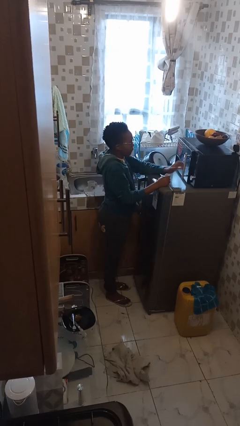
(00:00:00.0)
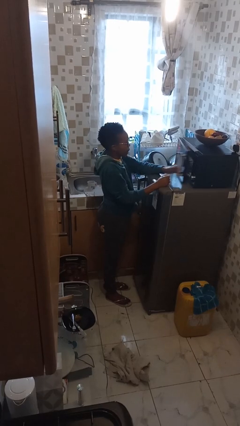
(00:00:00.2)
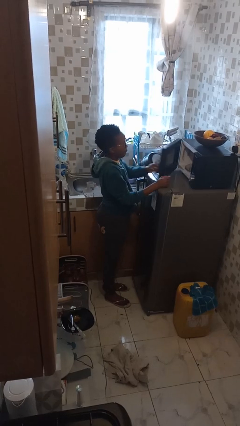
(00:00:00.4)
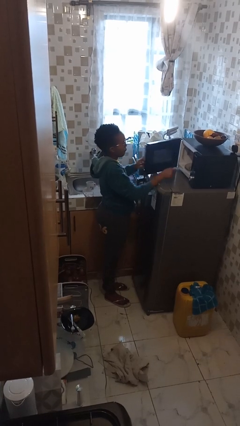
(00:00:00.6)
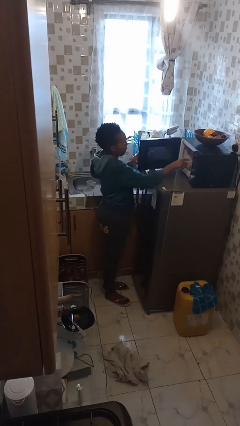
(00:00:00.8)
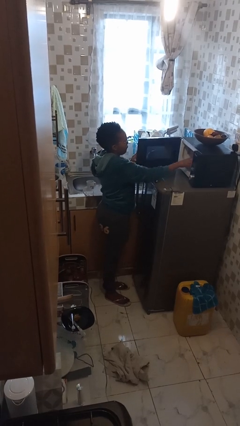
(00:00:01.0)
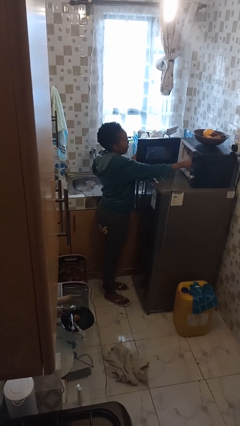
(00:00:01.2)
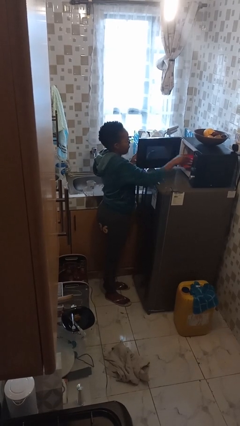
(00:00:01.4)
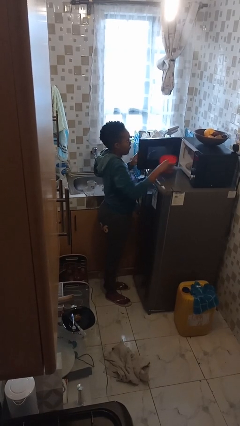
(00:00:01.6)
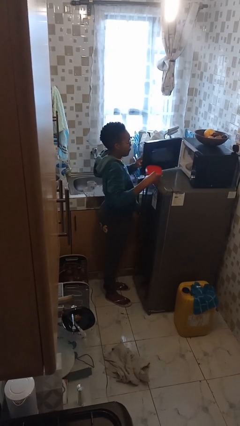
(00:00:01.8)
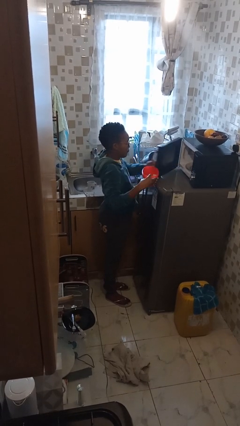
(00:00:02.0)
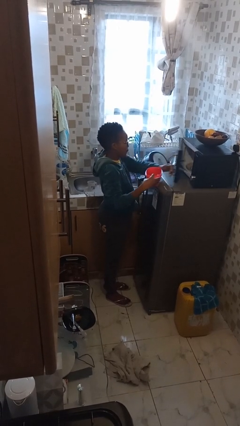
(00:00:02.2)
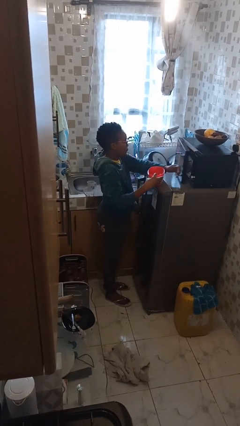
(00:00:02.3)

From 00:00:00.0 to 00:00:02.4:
person takes object from microwave

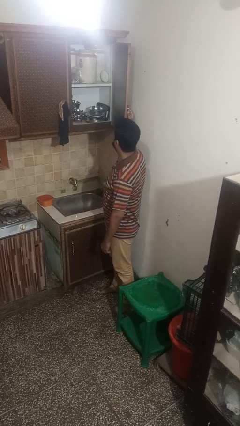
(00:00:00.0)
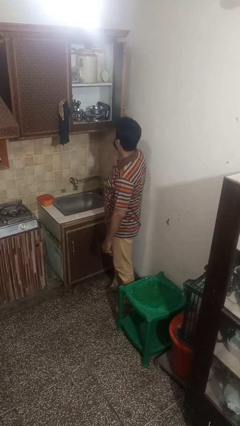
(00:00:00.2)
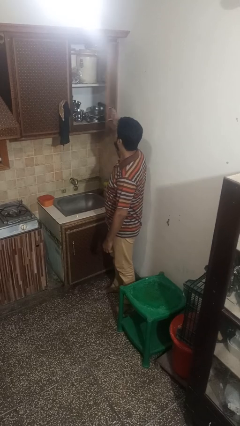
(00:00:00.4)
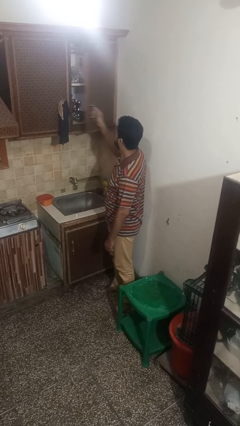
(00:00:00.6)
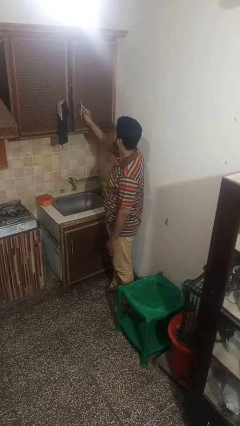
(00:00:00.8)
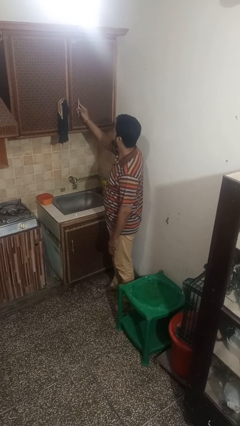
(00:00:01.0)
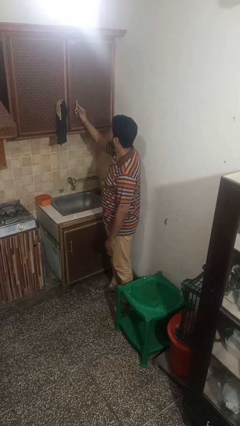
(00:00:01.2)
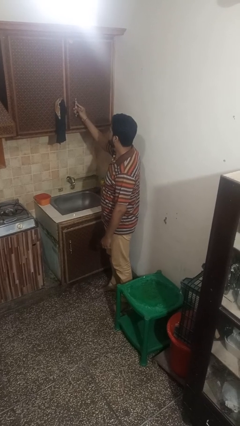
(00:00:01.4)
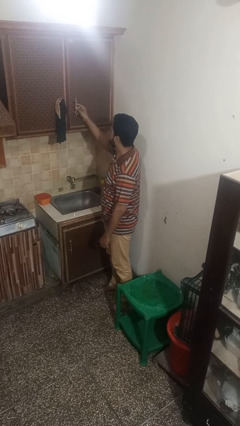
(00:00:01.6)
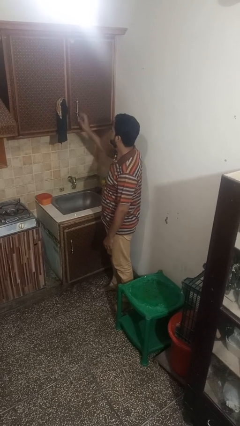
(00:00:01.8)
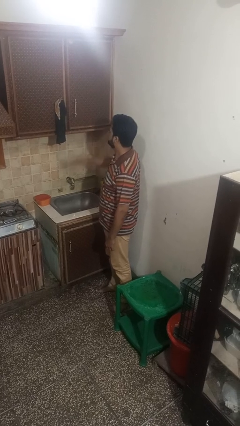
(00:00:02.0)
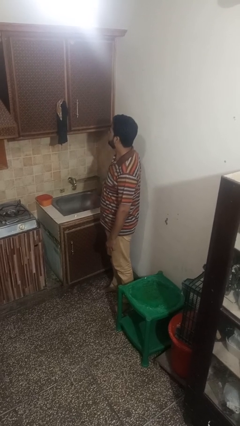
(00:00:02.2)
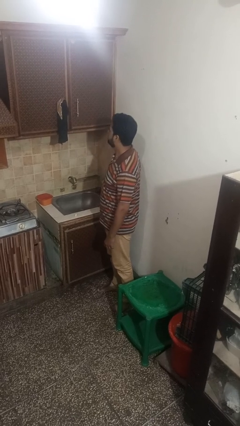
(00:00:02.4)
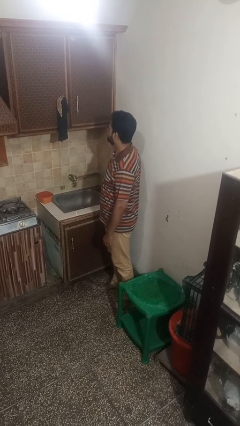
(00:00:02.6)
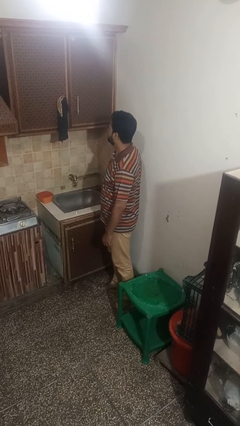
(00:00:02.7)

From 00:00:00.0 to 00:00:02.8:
person closes cabinet

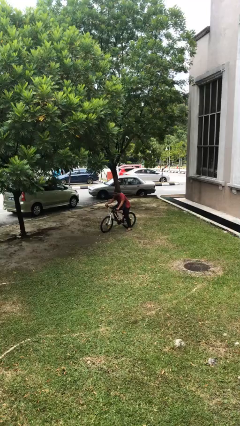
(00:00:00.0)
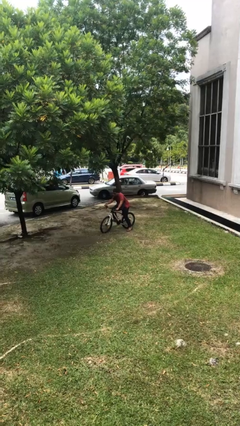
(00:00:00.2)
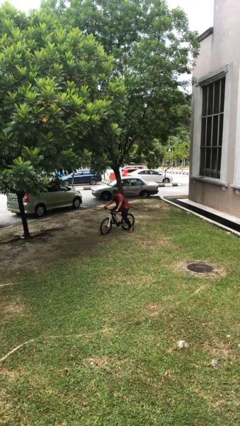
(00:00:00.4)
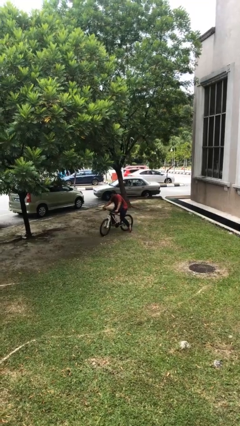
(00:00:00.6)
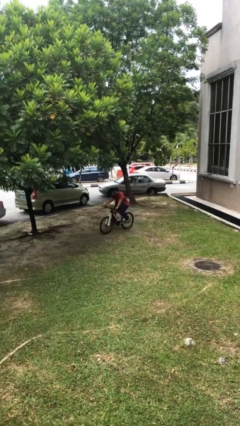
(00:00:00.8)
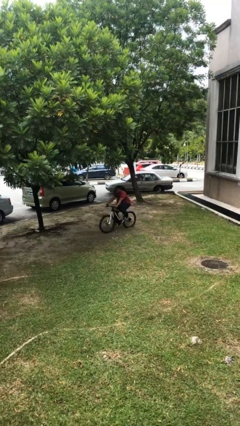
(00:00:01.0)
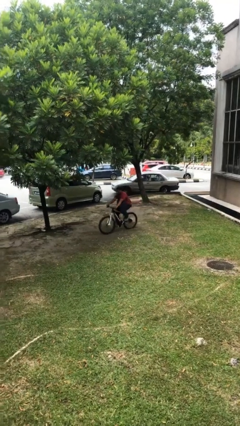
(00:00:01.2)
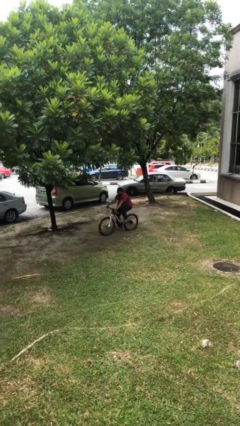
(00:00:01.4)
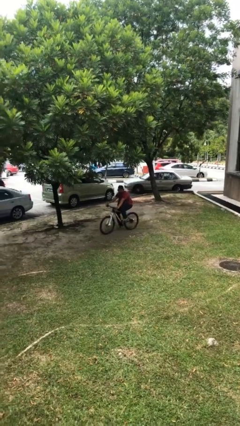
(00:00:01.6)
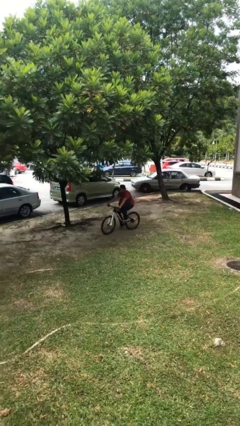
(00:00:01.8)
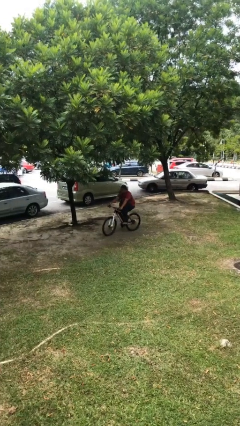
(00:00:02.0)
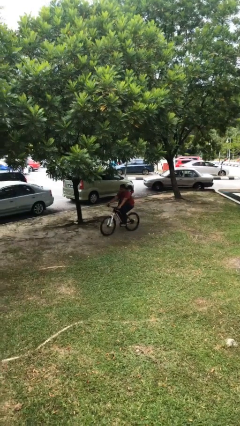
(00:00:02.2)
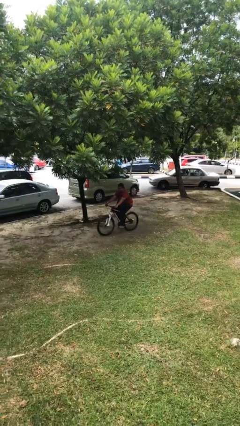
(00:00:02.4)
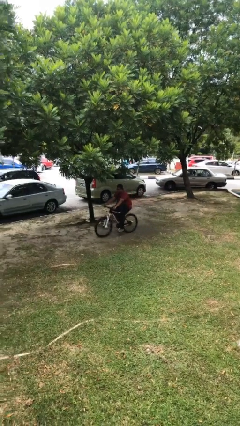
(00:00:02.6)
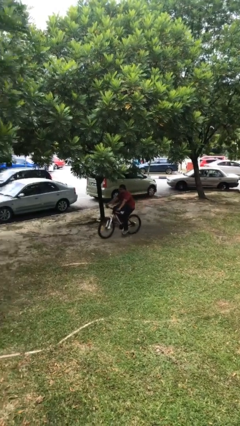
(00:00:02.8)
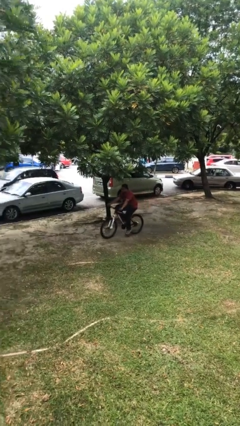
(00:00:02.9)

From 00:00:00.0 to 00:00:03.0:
person rides bicycle

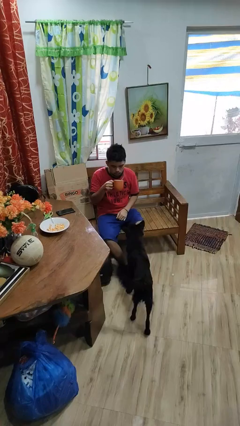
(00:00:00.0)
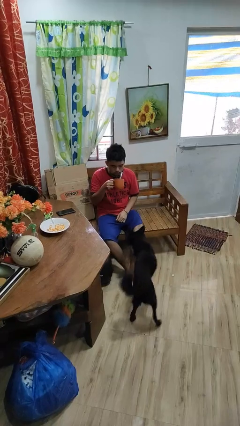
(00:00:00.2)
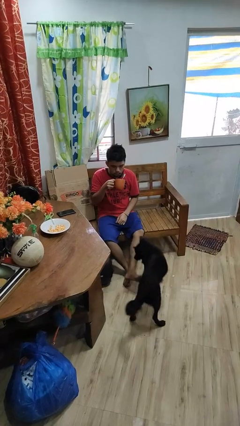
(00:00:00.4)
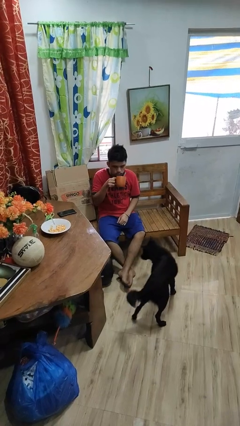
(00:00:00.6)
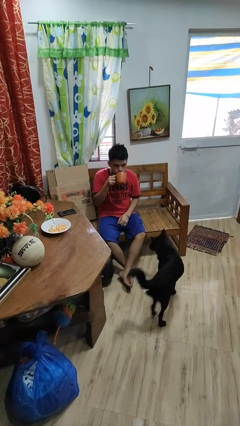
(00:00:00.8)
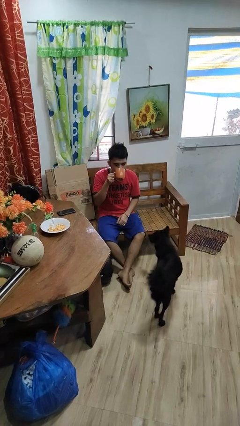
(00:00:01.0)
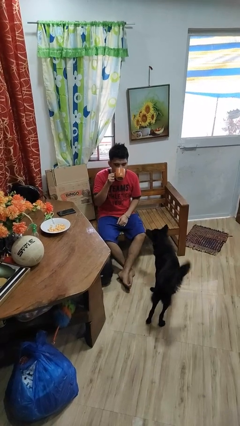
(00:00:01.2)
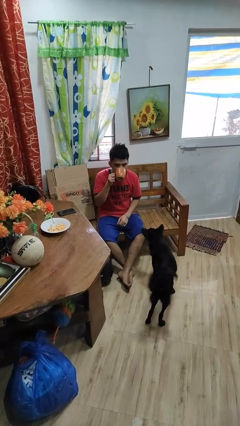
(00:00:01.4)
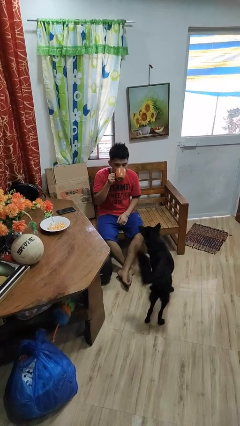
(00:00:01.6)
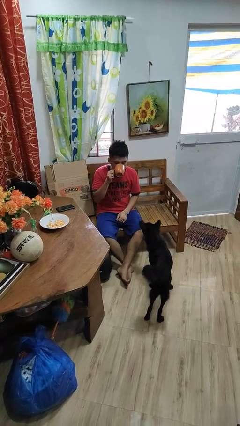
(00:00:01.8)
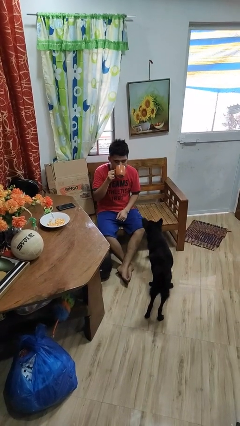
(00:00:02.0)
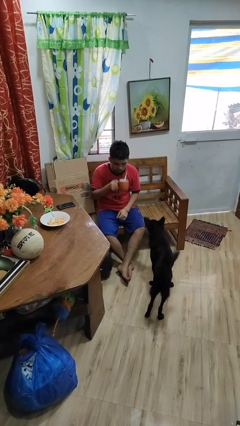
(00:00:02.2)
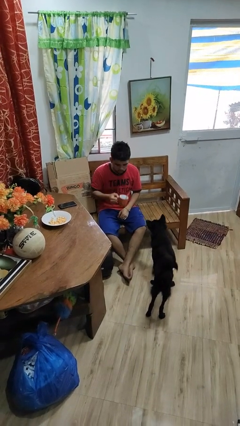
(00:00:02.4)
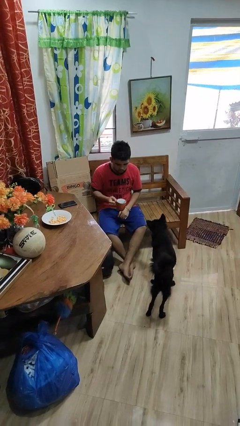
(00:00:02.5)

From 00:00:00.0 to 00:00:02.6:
person drinks from mug

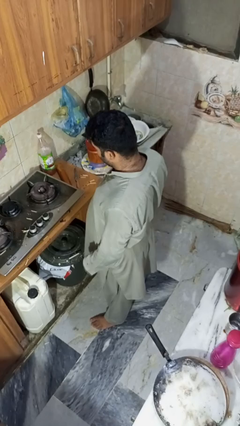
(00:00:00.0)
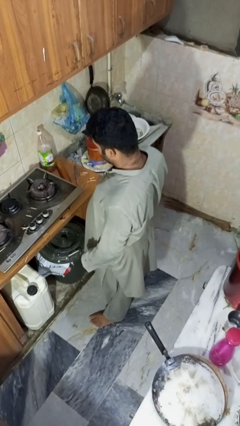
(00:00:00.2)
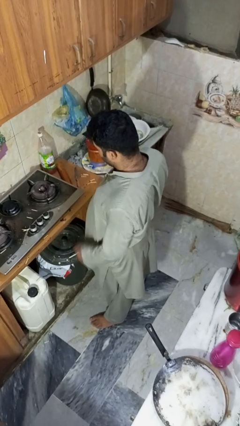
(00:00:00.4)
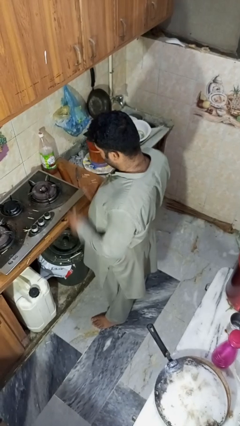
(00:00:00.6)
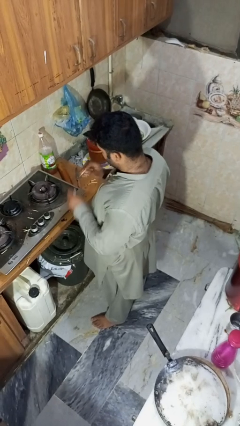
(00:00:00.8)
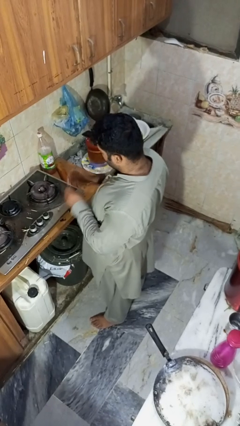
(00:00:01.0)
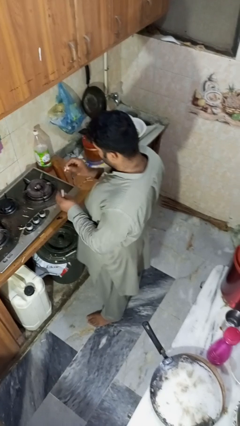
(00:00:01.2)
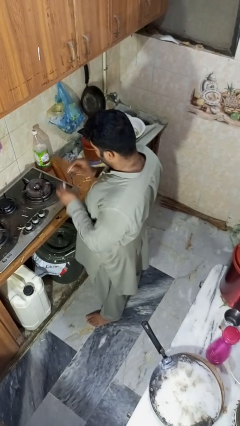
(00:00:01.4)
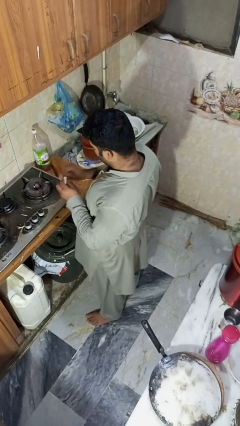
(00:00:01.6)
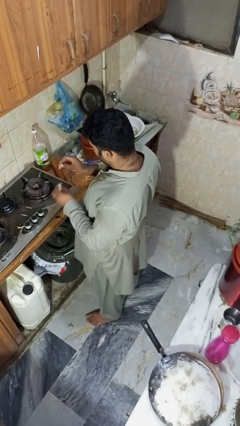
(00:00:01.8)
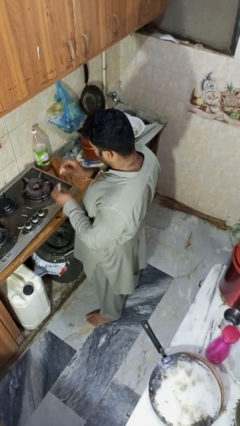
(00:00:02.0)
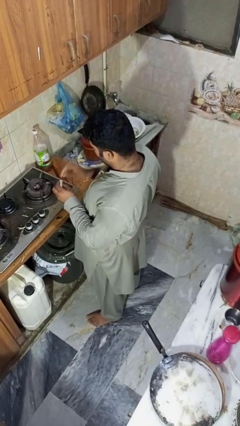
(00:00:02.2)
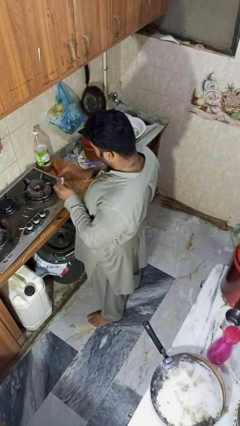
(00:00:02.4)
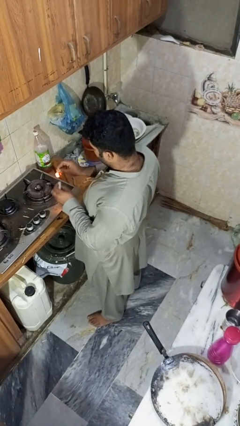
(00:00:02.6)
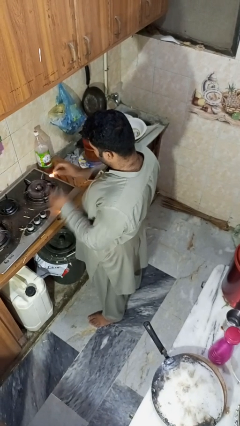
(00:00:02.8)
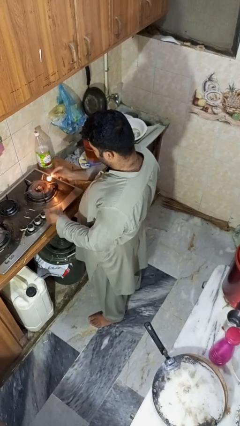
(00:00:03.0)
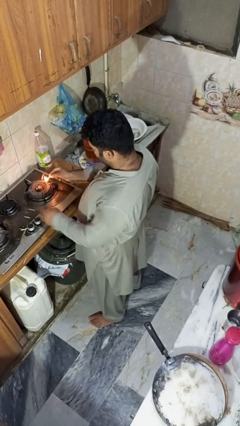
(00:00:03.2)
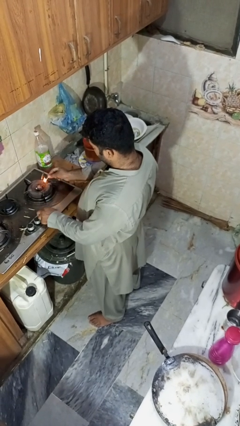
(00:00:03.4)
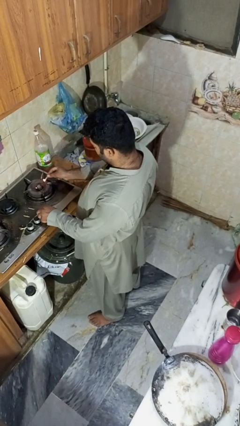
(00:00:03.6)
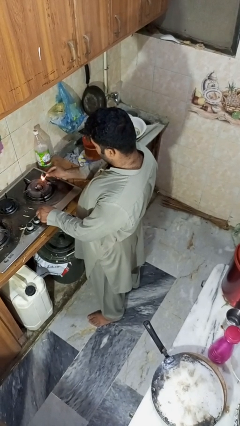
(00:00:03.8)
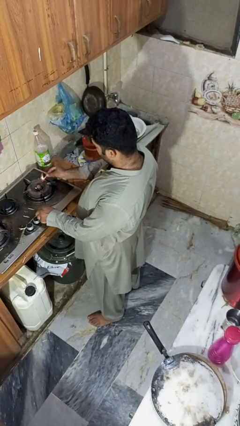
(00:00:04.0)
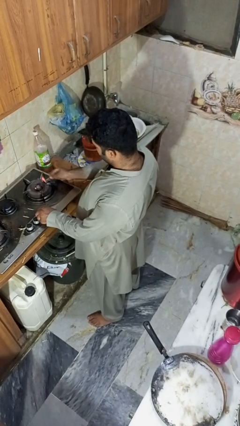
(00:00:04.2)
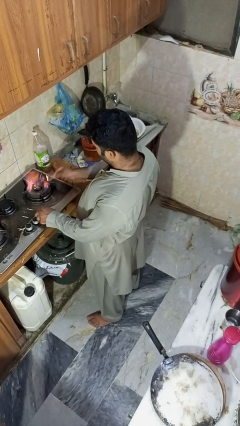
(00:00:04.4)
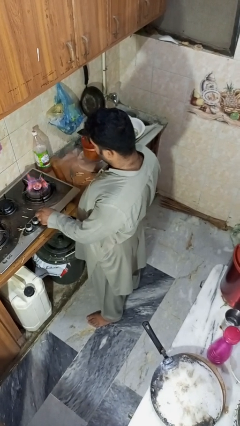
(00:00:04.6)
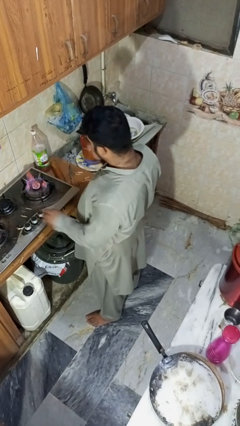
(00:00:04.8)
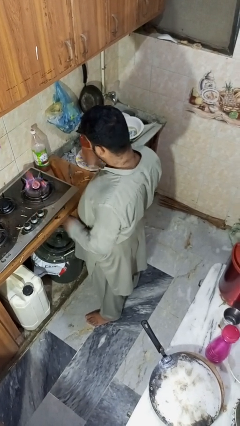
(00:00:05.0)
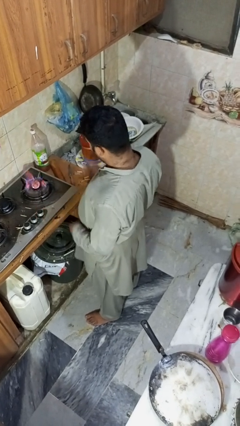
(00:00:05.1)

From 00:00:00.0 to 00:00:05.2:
person turns on stovetop

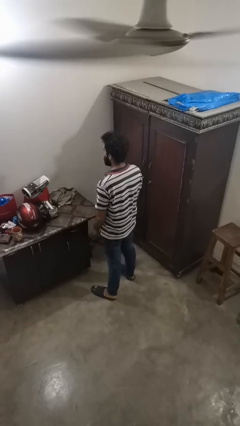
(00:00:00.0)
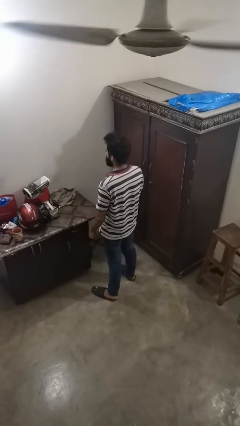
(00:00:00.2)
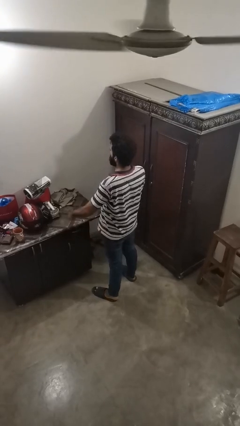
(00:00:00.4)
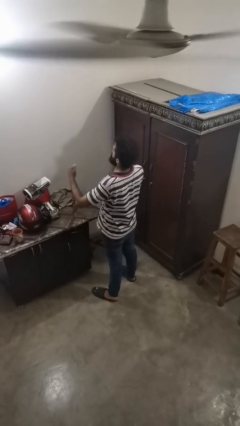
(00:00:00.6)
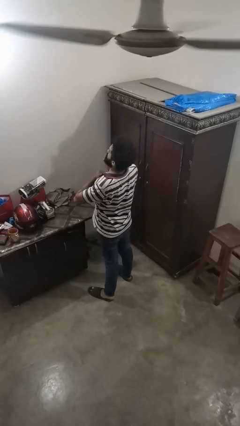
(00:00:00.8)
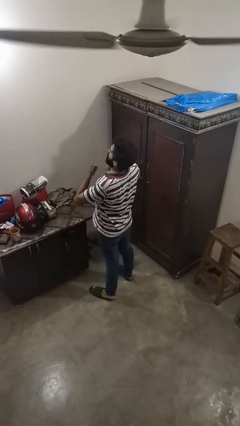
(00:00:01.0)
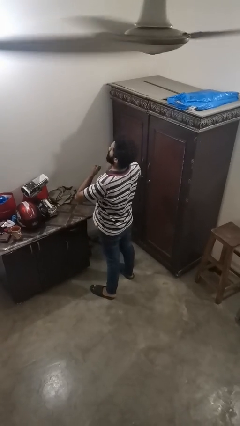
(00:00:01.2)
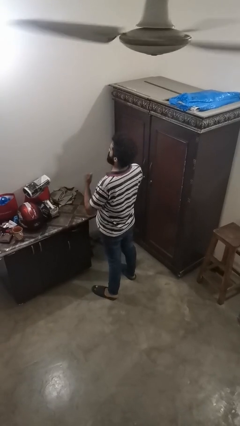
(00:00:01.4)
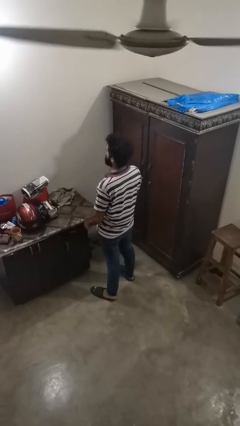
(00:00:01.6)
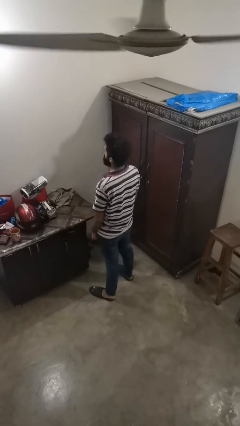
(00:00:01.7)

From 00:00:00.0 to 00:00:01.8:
person drums on chest
